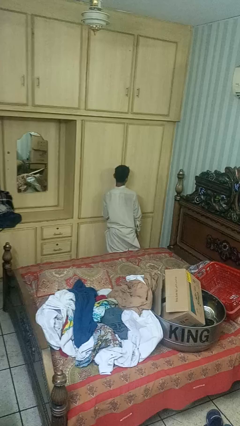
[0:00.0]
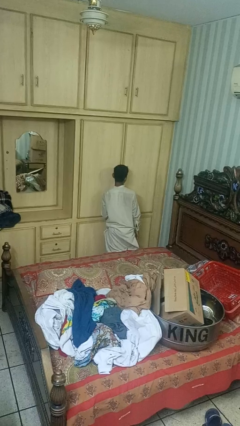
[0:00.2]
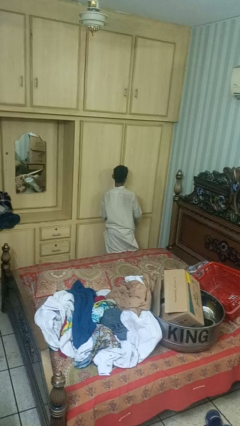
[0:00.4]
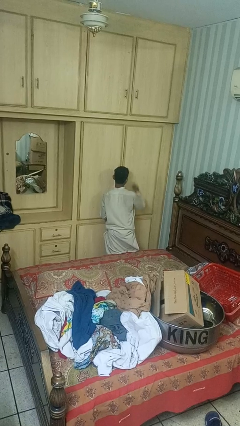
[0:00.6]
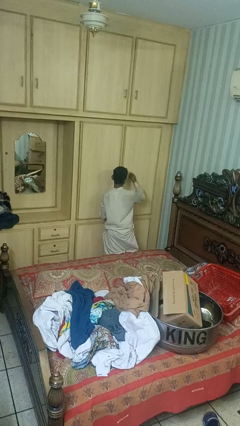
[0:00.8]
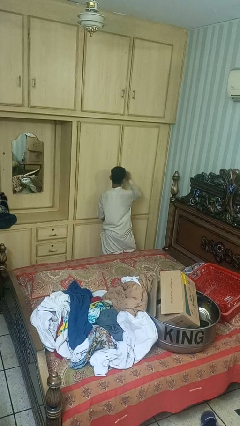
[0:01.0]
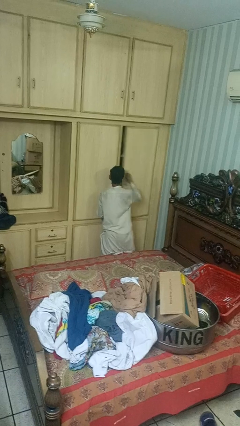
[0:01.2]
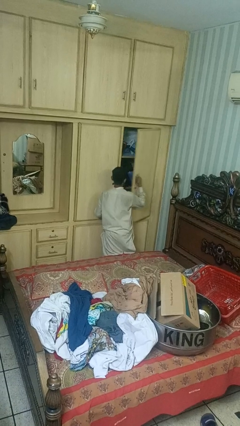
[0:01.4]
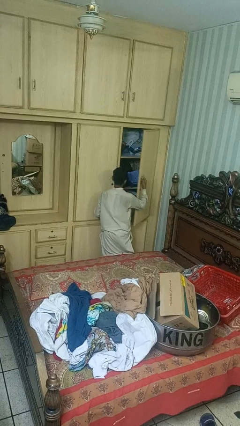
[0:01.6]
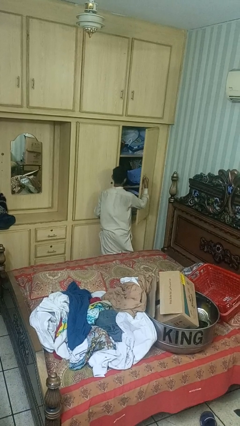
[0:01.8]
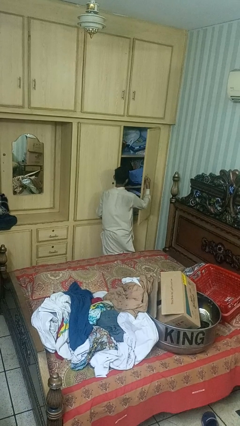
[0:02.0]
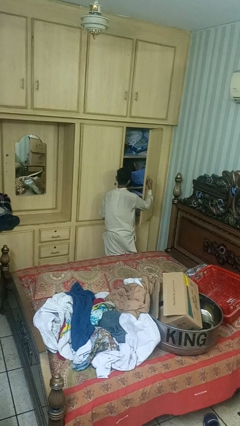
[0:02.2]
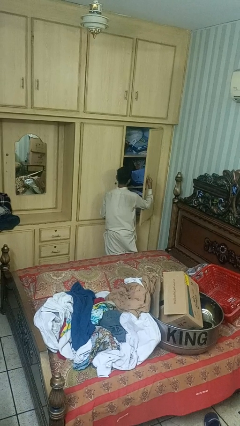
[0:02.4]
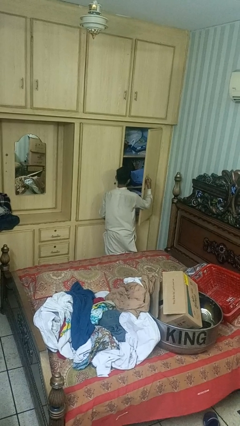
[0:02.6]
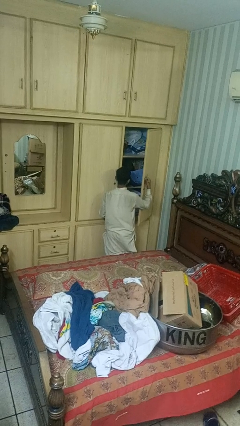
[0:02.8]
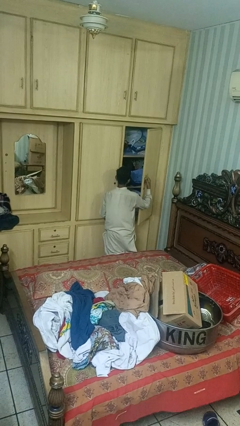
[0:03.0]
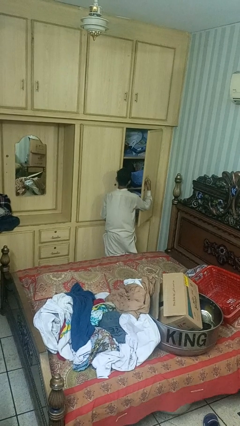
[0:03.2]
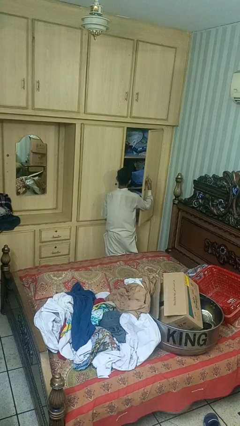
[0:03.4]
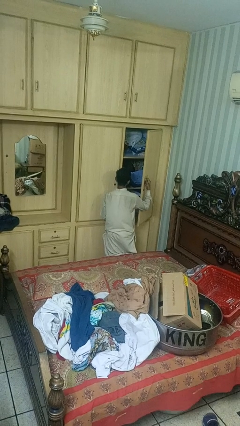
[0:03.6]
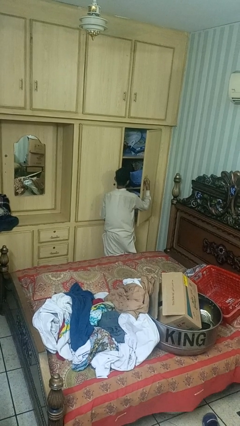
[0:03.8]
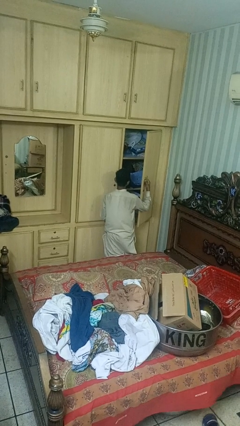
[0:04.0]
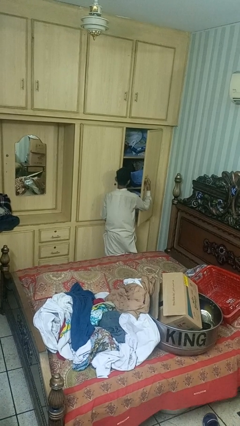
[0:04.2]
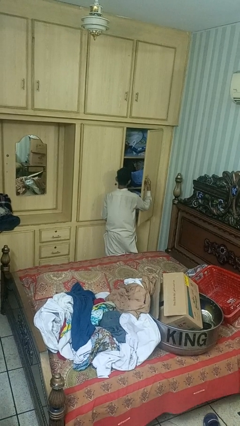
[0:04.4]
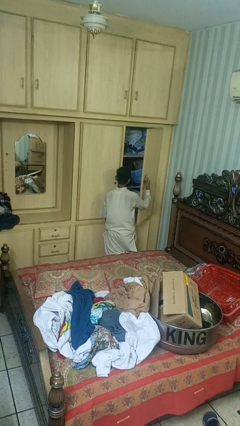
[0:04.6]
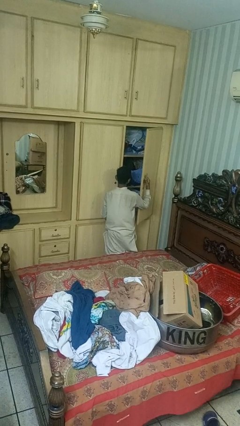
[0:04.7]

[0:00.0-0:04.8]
person opens closet door

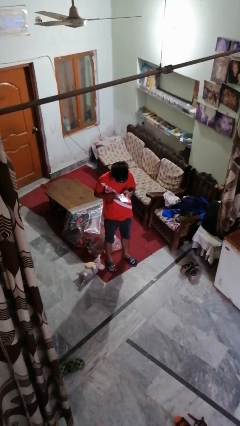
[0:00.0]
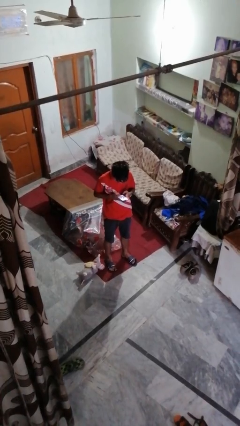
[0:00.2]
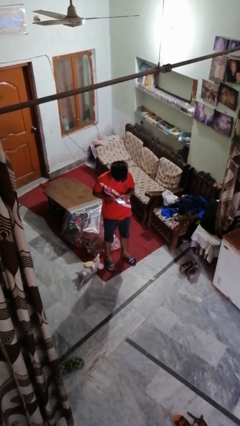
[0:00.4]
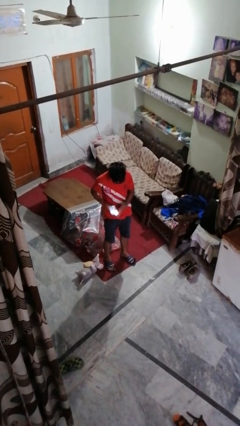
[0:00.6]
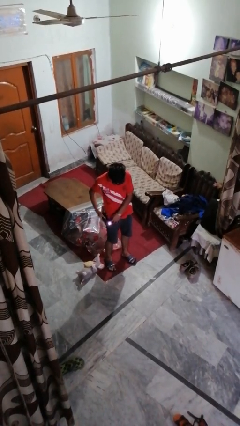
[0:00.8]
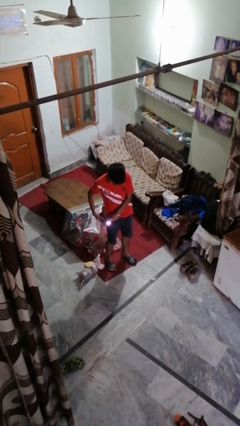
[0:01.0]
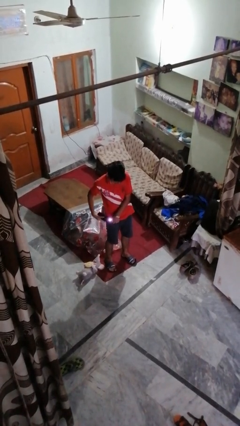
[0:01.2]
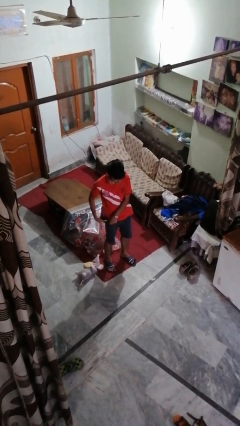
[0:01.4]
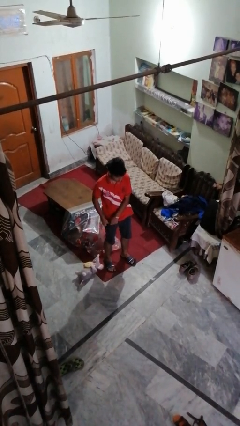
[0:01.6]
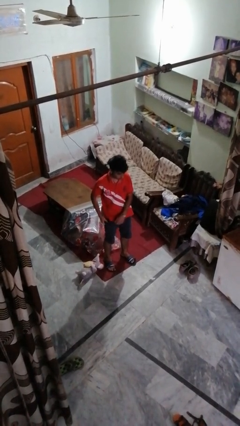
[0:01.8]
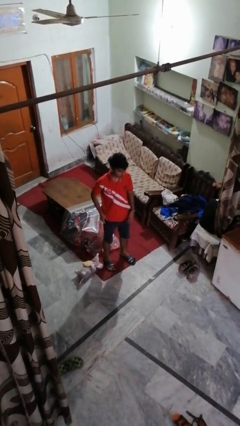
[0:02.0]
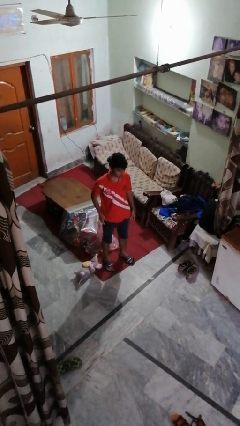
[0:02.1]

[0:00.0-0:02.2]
person puts phone into pocket

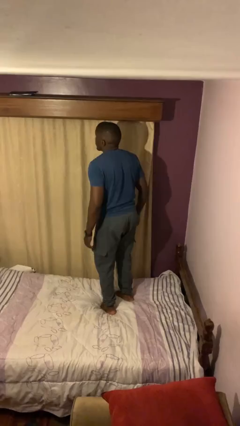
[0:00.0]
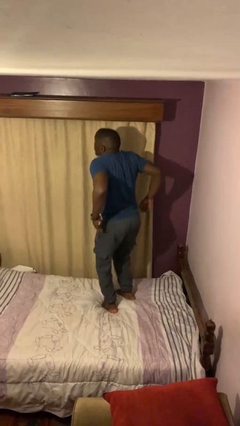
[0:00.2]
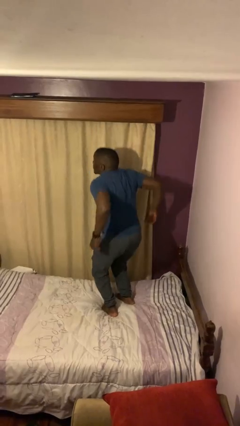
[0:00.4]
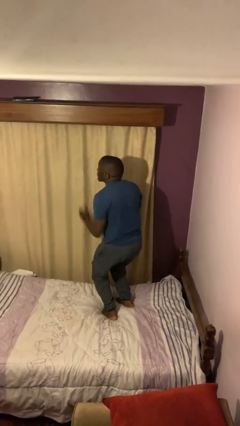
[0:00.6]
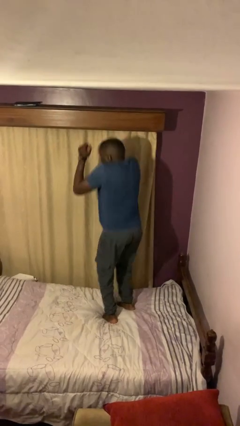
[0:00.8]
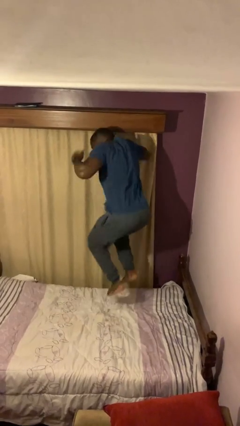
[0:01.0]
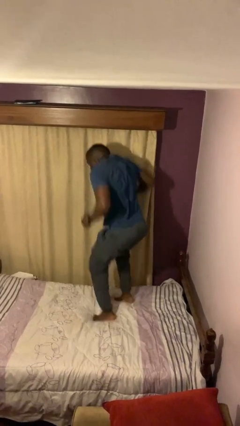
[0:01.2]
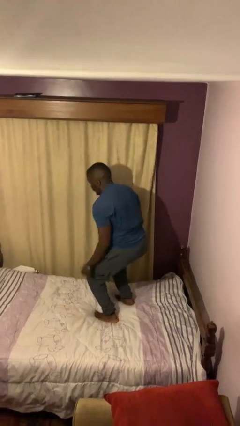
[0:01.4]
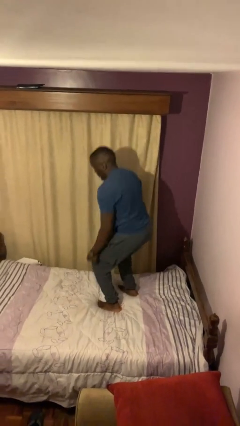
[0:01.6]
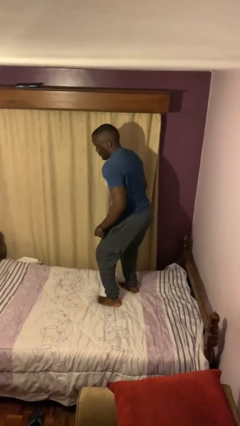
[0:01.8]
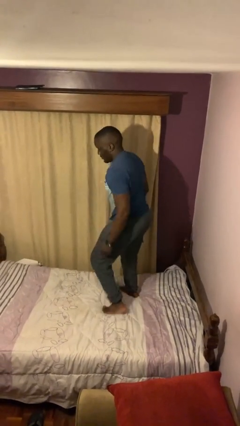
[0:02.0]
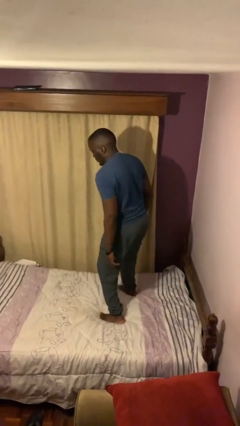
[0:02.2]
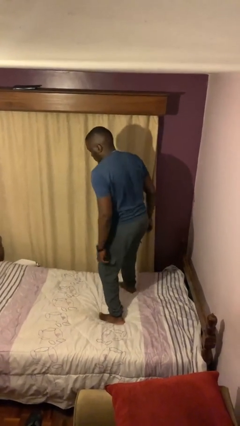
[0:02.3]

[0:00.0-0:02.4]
person jumps on bed

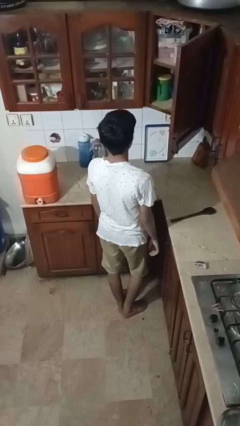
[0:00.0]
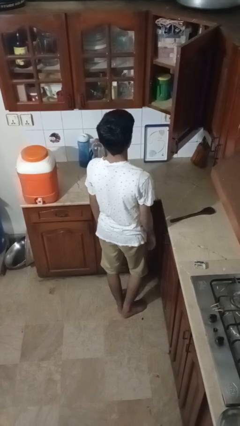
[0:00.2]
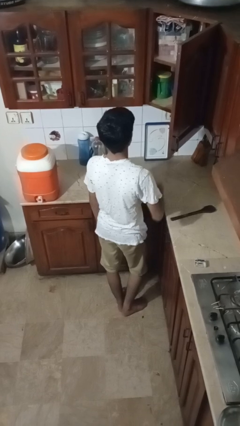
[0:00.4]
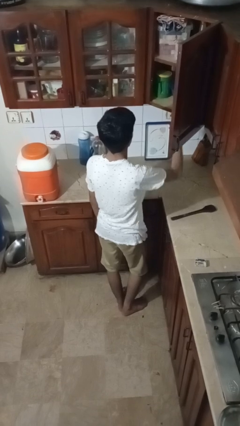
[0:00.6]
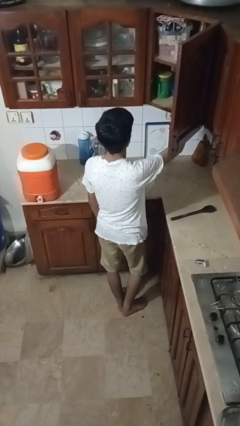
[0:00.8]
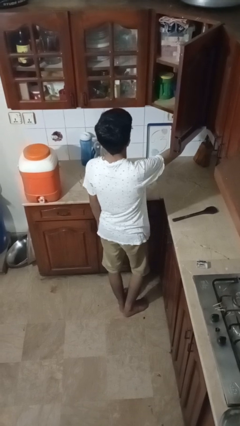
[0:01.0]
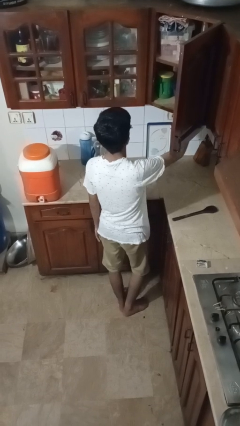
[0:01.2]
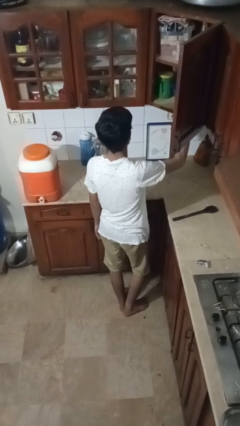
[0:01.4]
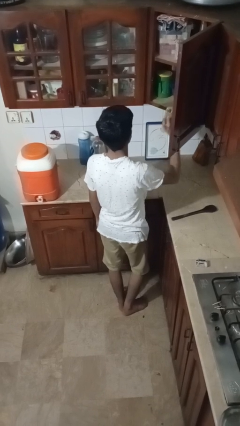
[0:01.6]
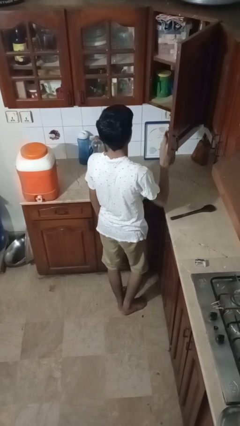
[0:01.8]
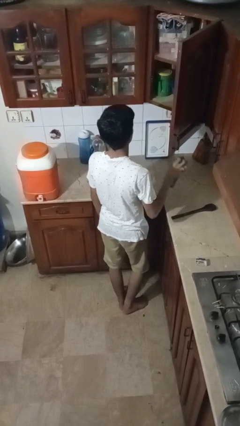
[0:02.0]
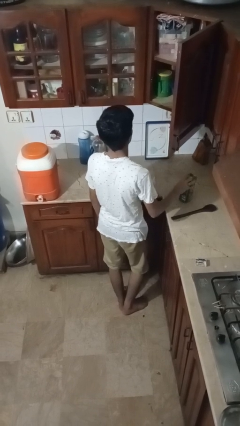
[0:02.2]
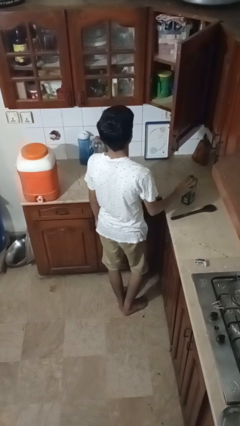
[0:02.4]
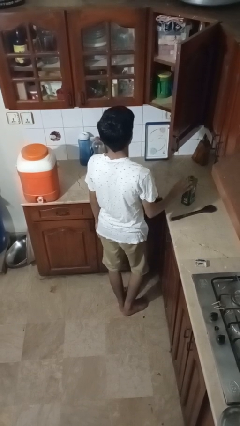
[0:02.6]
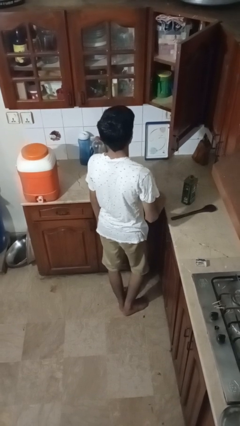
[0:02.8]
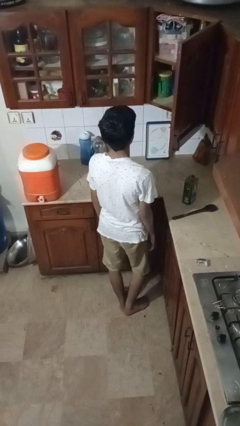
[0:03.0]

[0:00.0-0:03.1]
person takes object from cabinet

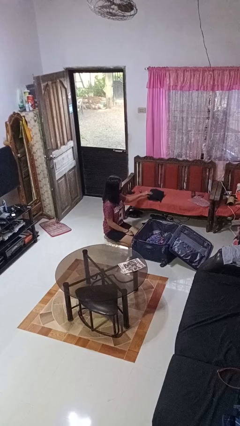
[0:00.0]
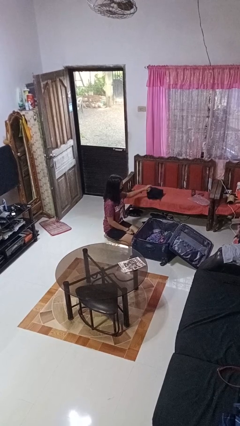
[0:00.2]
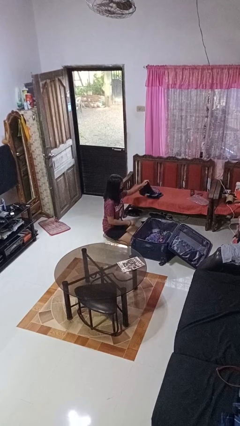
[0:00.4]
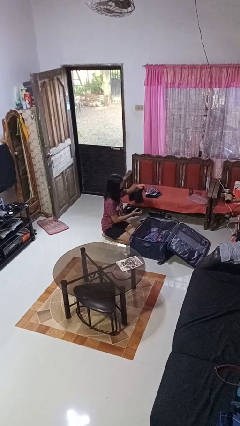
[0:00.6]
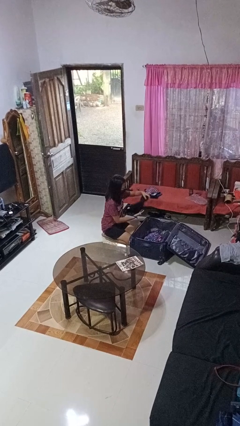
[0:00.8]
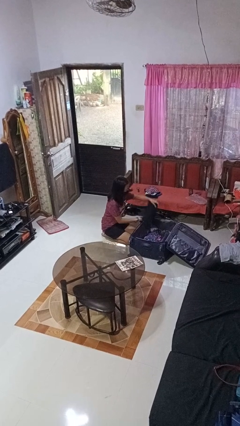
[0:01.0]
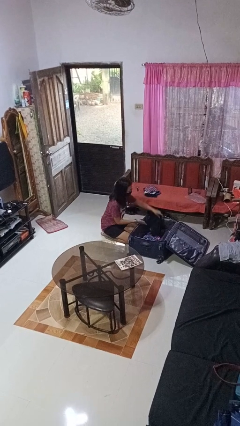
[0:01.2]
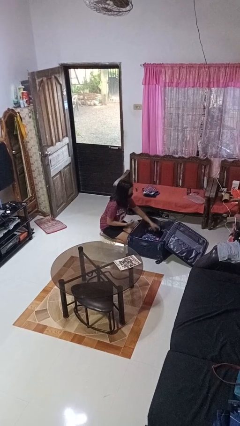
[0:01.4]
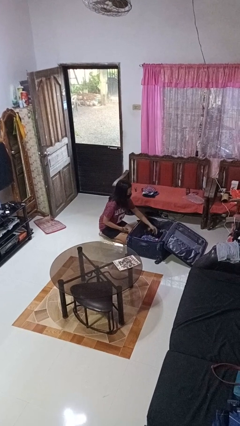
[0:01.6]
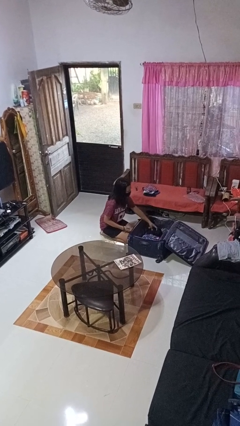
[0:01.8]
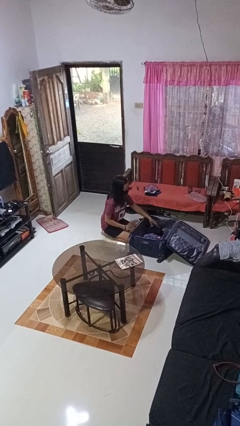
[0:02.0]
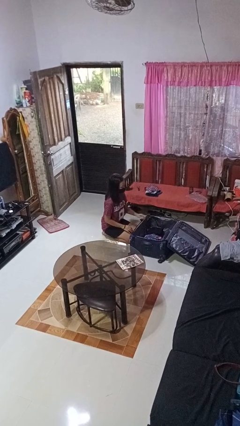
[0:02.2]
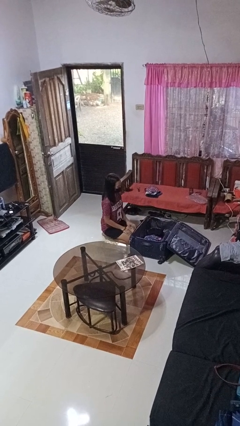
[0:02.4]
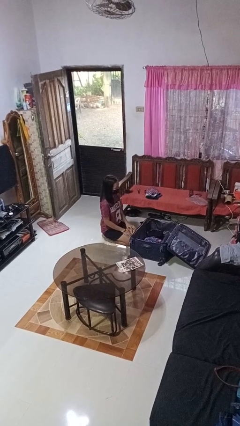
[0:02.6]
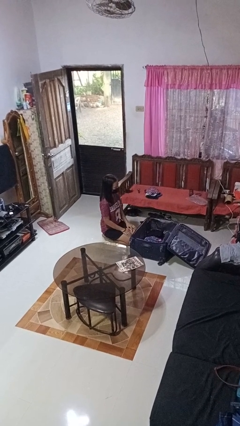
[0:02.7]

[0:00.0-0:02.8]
person loads clothes into suitcase

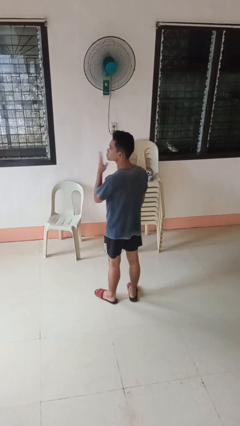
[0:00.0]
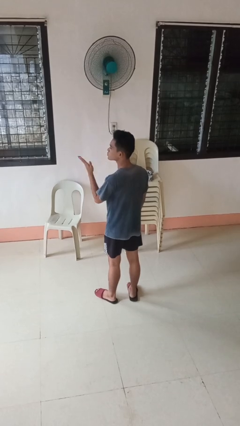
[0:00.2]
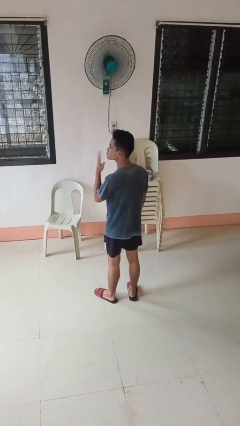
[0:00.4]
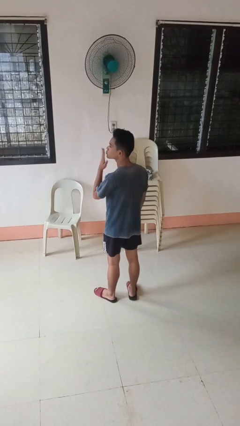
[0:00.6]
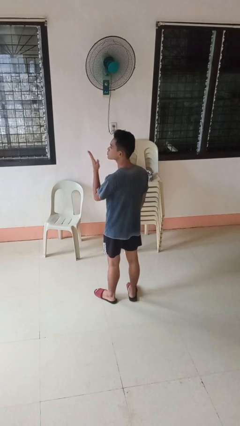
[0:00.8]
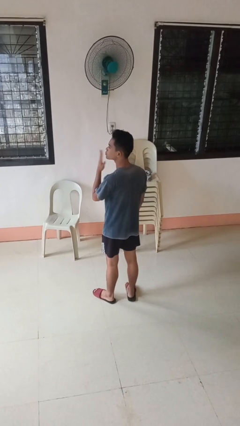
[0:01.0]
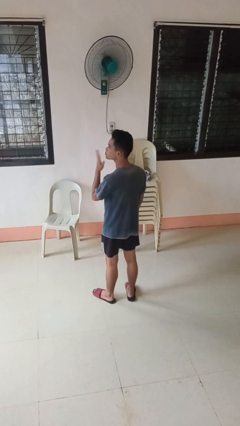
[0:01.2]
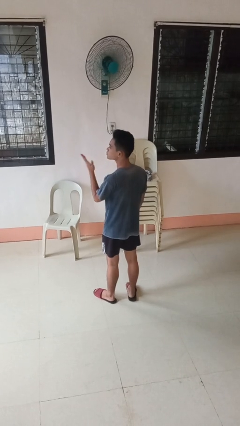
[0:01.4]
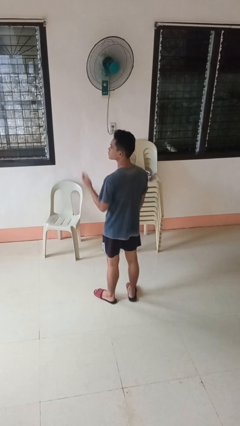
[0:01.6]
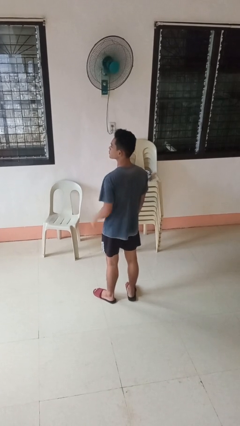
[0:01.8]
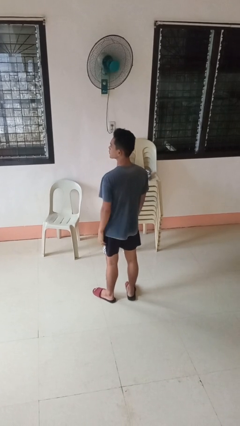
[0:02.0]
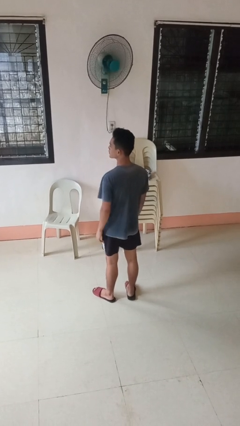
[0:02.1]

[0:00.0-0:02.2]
person gestures blow kiss
